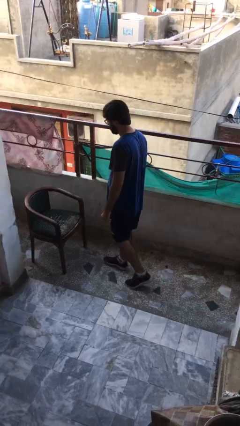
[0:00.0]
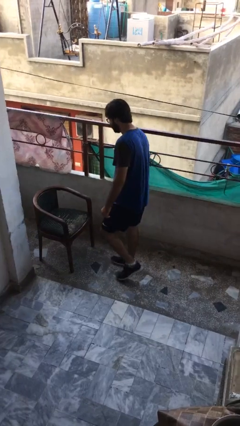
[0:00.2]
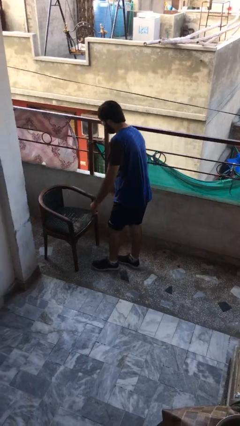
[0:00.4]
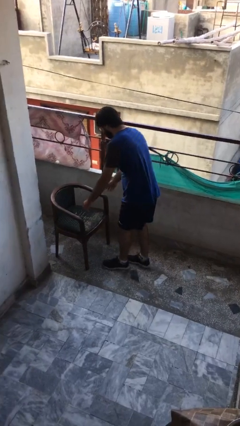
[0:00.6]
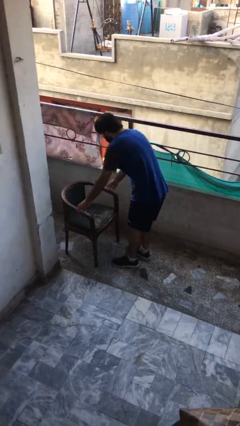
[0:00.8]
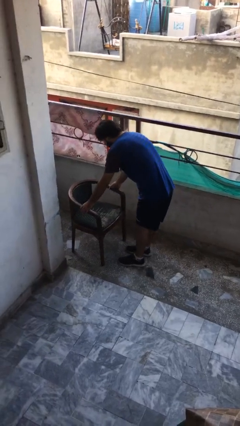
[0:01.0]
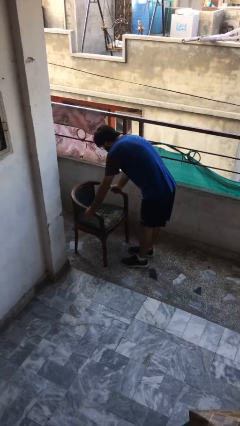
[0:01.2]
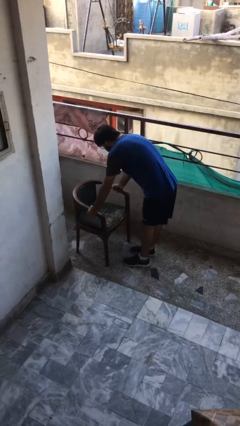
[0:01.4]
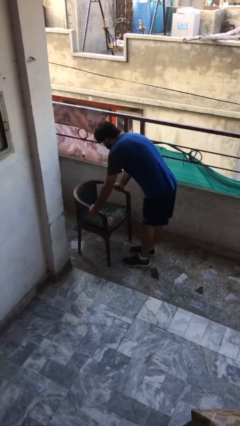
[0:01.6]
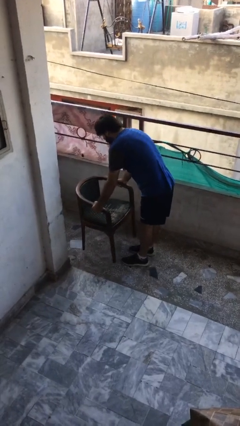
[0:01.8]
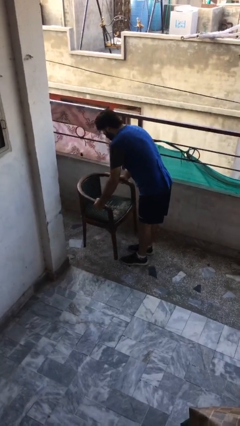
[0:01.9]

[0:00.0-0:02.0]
person picks up object from floor

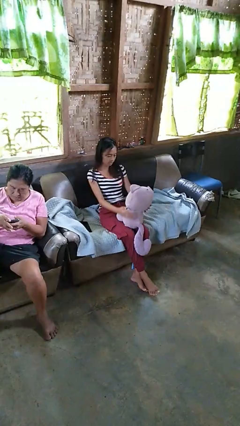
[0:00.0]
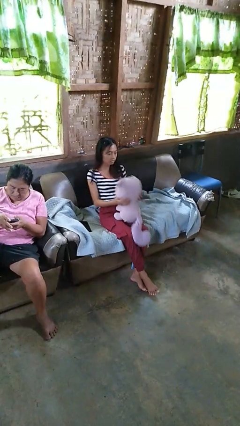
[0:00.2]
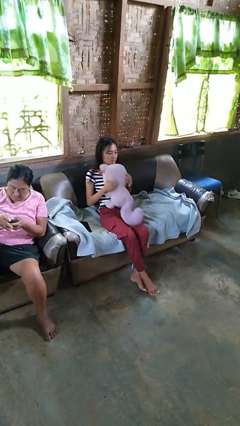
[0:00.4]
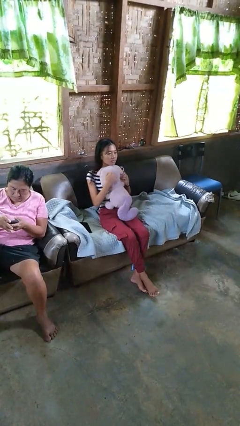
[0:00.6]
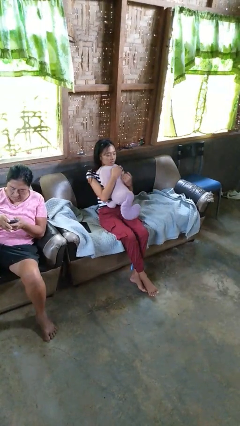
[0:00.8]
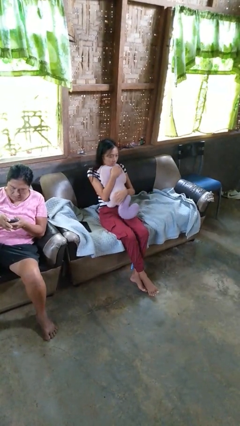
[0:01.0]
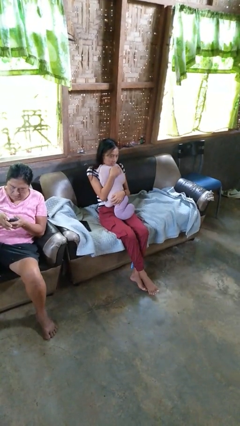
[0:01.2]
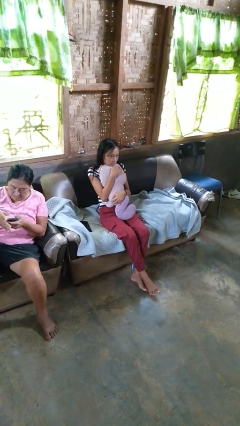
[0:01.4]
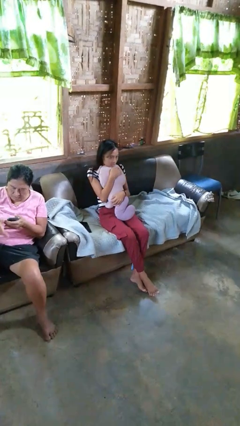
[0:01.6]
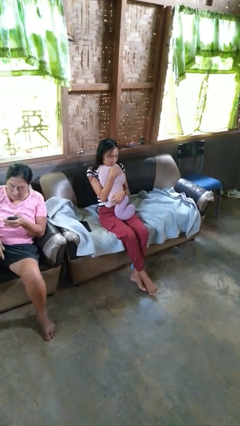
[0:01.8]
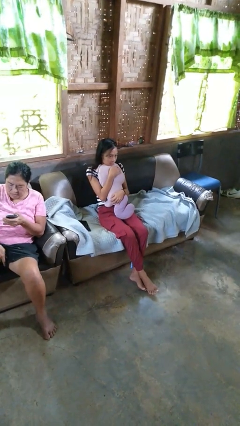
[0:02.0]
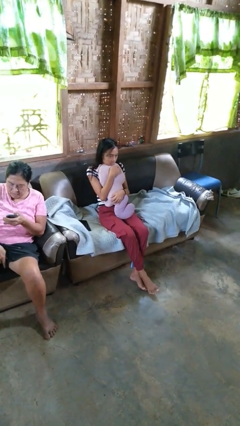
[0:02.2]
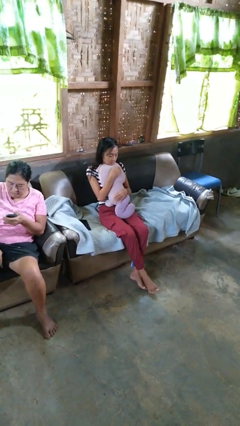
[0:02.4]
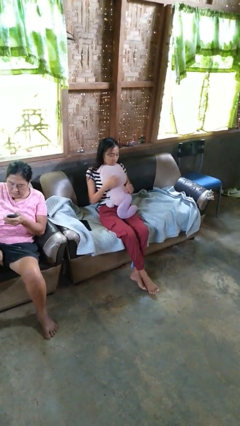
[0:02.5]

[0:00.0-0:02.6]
person hugs stuffed animal

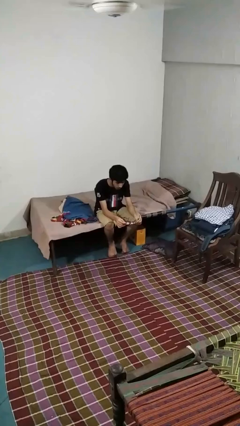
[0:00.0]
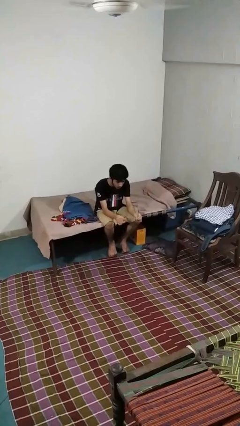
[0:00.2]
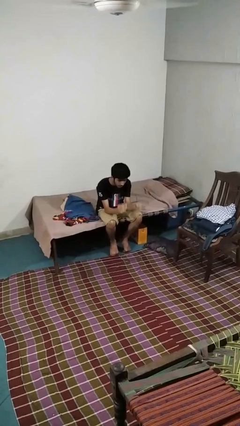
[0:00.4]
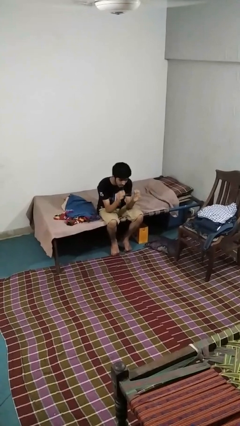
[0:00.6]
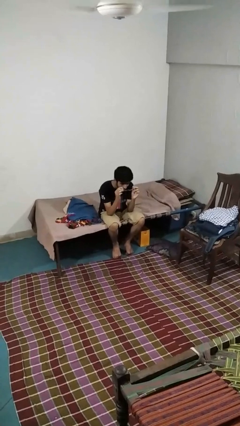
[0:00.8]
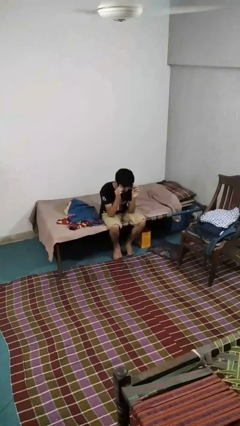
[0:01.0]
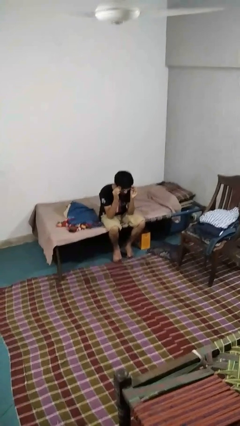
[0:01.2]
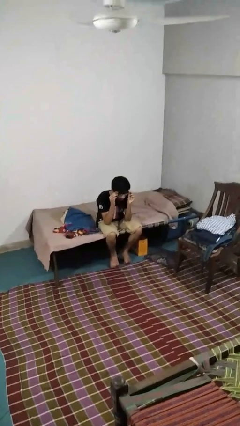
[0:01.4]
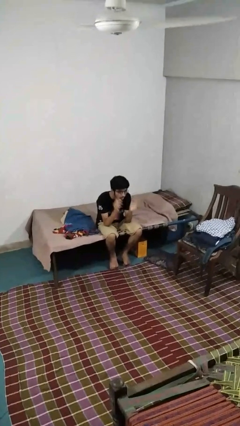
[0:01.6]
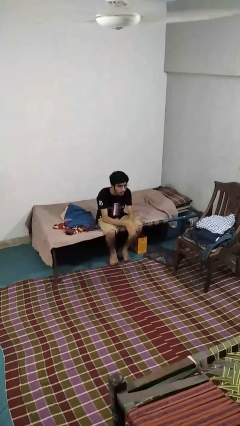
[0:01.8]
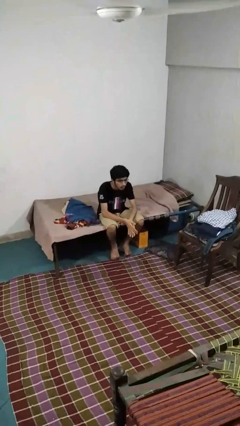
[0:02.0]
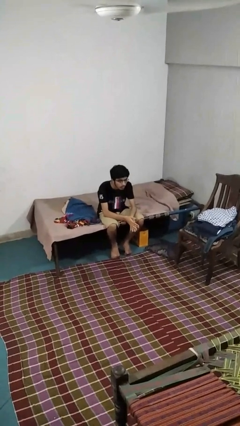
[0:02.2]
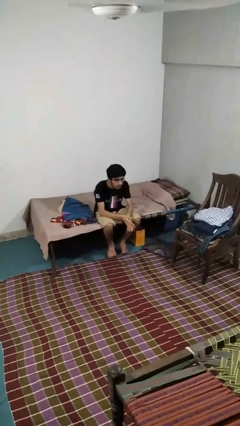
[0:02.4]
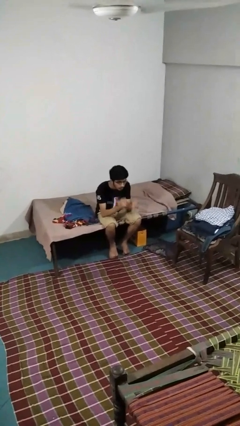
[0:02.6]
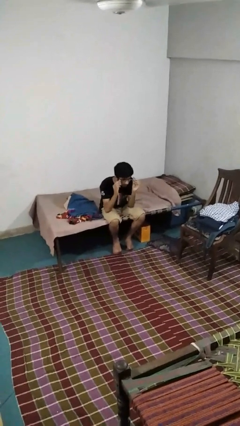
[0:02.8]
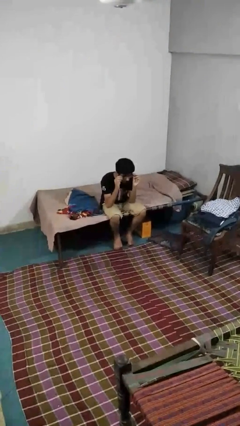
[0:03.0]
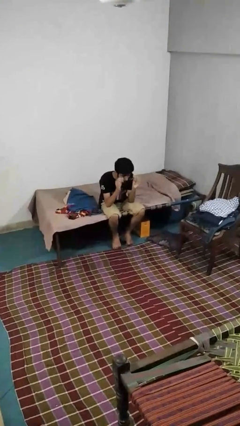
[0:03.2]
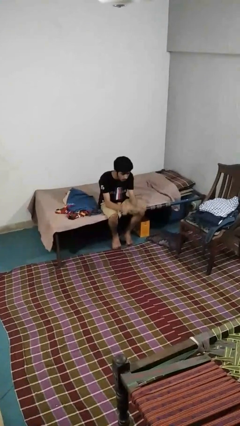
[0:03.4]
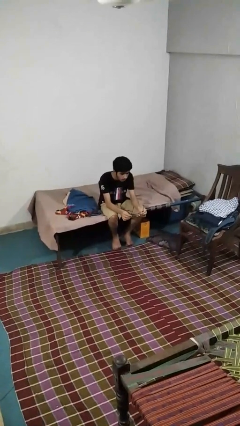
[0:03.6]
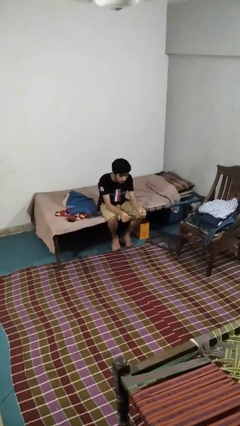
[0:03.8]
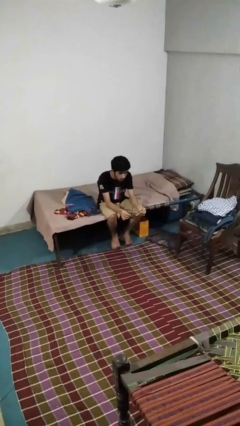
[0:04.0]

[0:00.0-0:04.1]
person puts on glasses

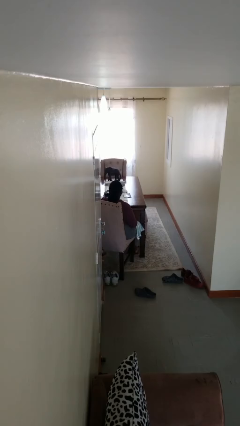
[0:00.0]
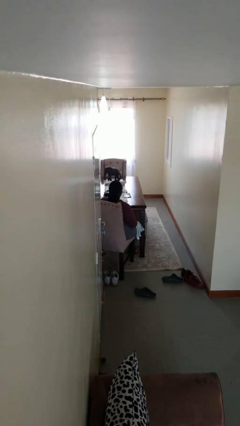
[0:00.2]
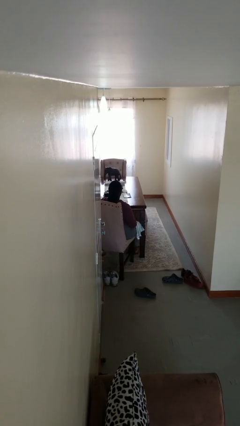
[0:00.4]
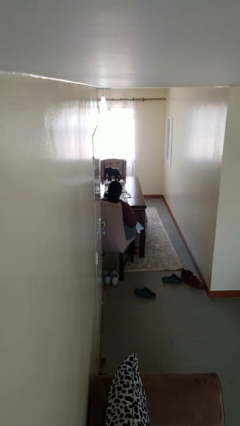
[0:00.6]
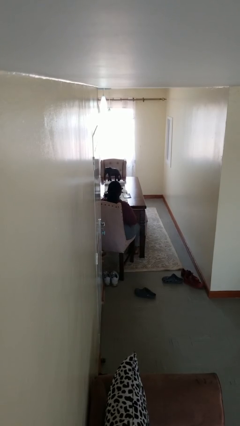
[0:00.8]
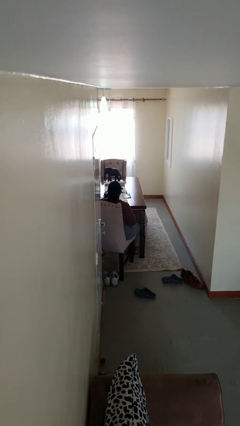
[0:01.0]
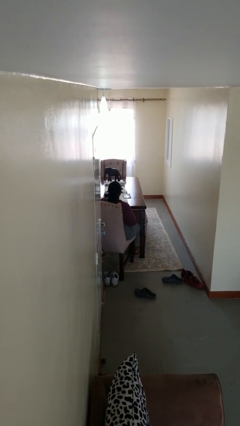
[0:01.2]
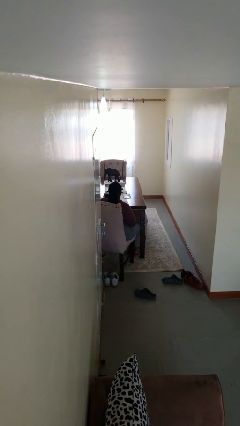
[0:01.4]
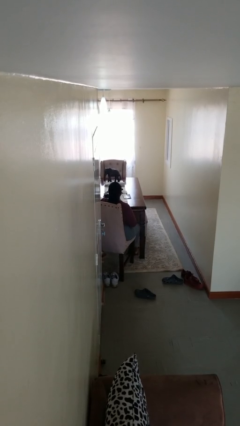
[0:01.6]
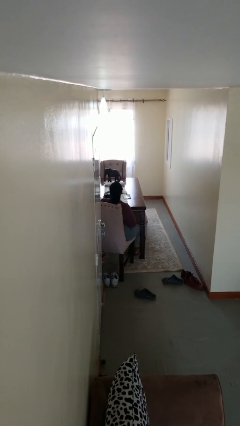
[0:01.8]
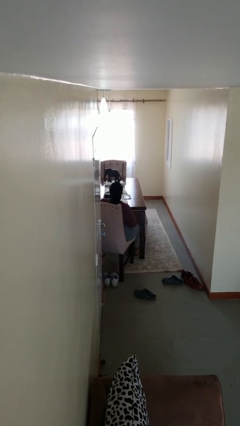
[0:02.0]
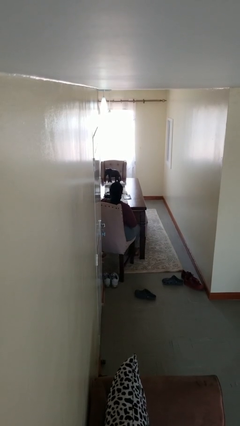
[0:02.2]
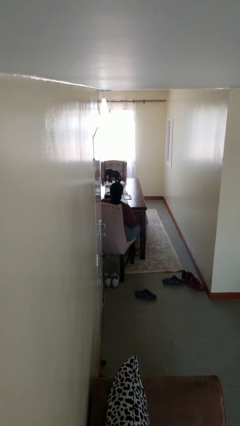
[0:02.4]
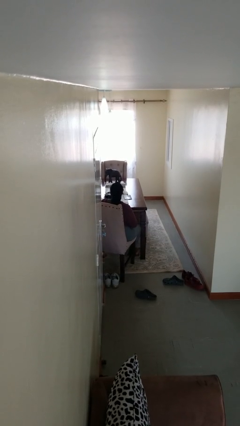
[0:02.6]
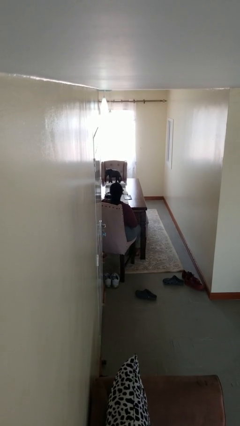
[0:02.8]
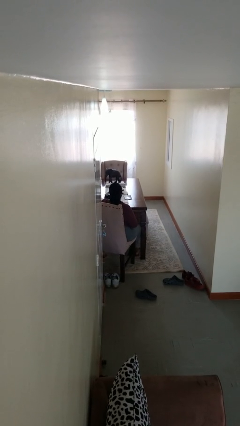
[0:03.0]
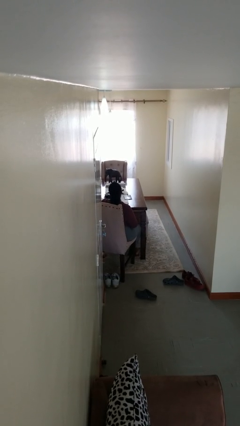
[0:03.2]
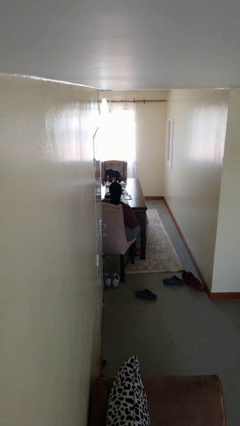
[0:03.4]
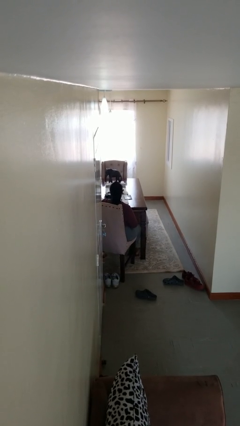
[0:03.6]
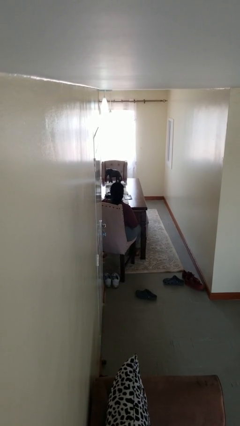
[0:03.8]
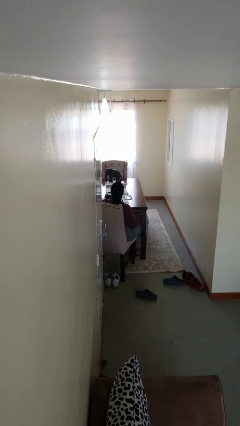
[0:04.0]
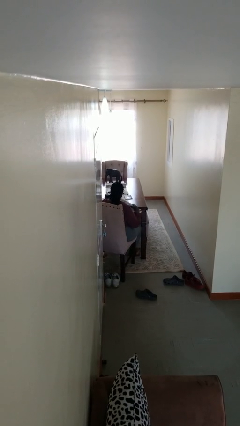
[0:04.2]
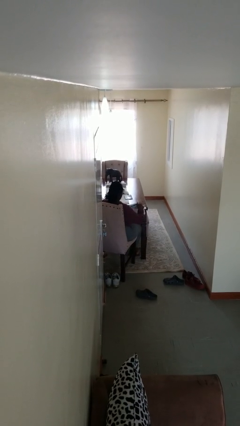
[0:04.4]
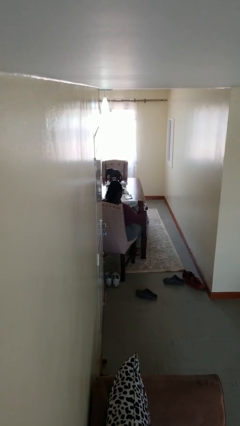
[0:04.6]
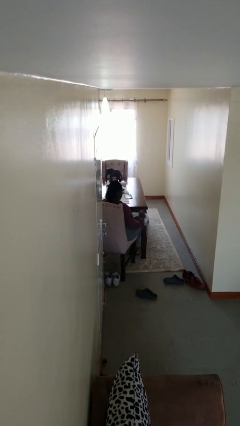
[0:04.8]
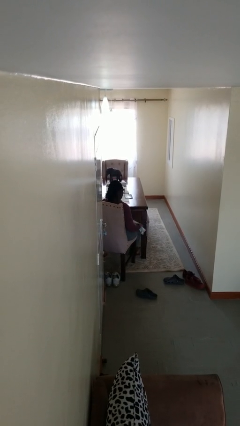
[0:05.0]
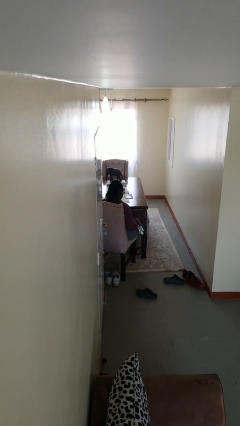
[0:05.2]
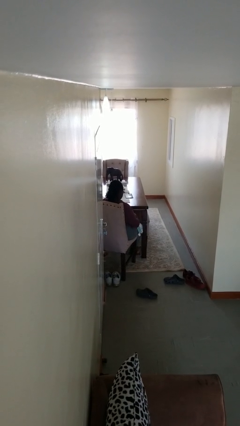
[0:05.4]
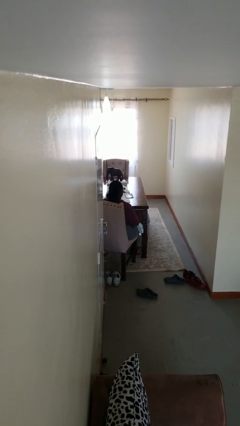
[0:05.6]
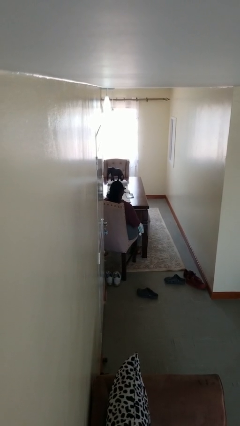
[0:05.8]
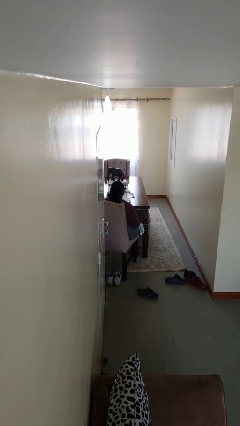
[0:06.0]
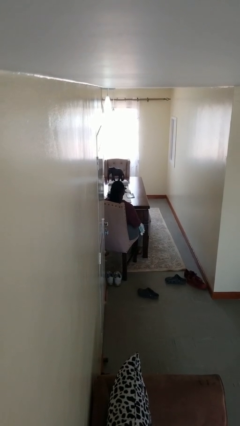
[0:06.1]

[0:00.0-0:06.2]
person wipes mouth with napkin

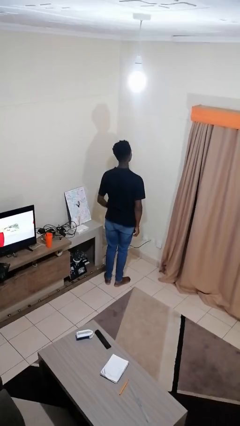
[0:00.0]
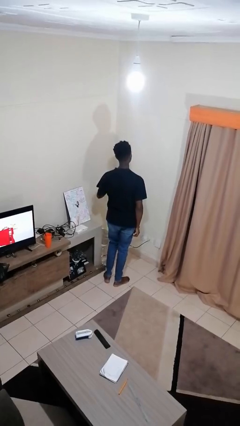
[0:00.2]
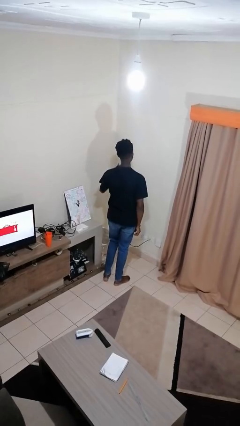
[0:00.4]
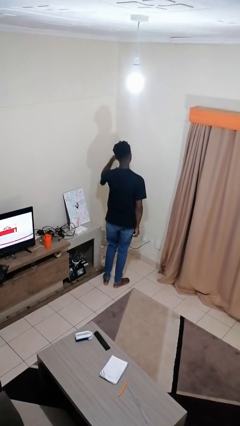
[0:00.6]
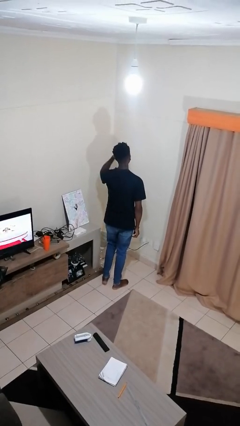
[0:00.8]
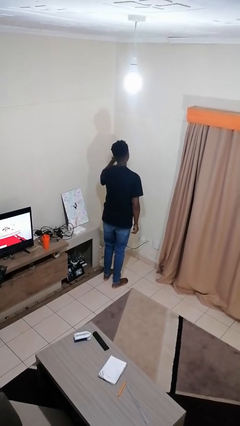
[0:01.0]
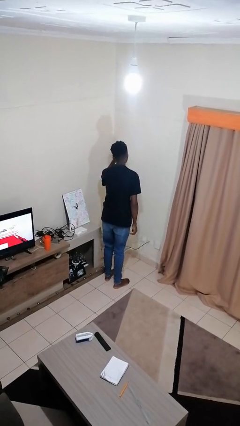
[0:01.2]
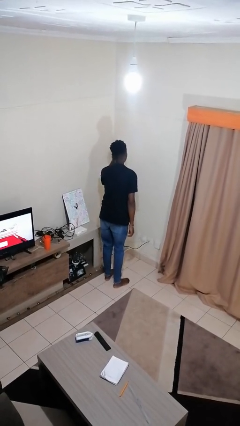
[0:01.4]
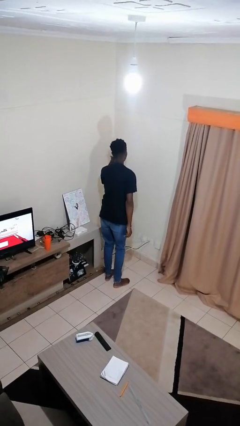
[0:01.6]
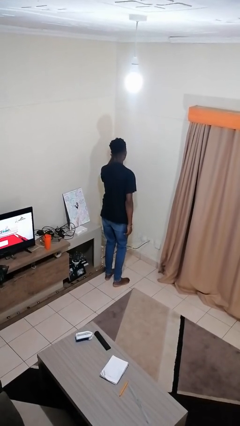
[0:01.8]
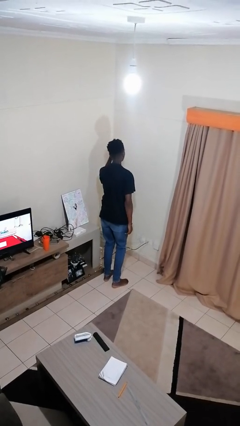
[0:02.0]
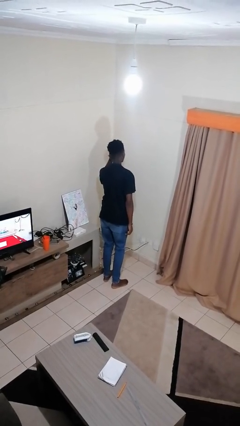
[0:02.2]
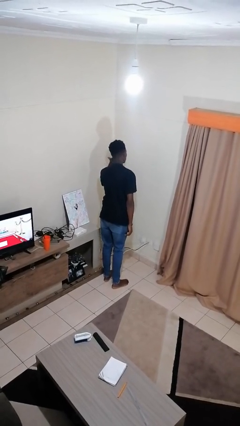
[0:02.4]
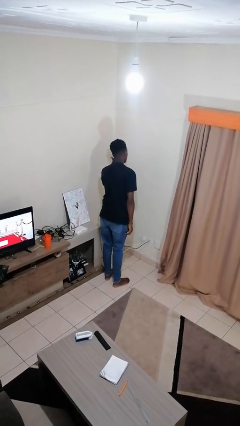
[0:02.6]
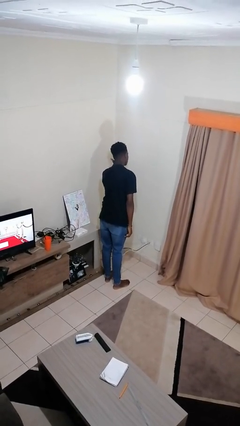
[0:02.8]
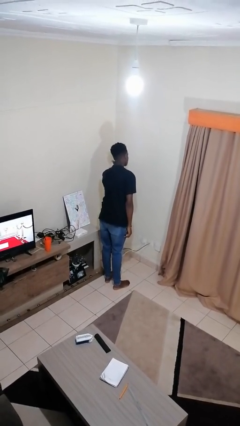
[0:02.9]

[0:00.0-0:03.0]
person gestures call me
